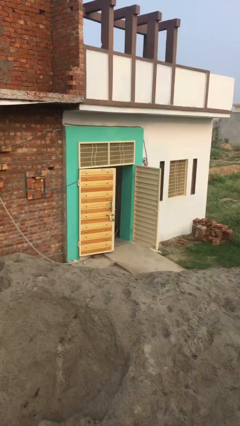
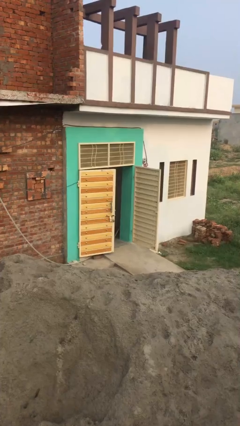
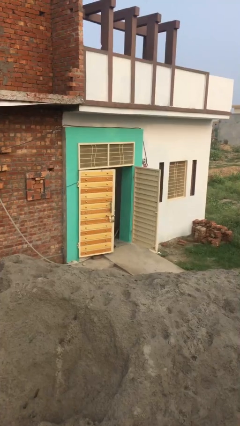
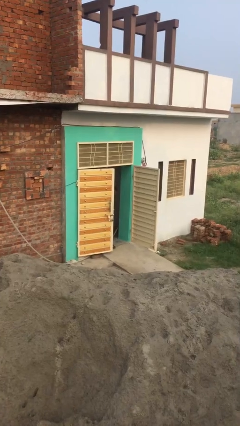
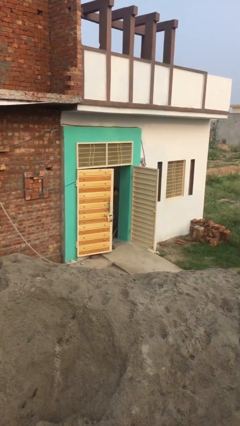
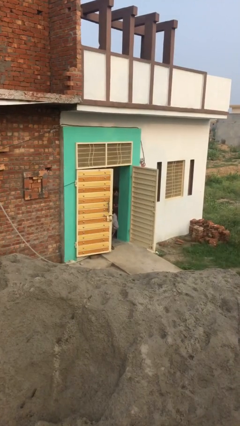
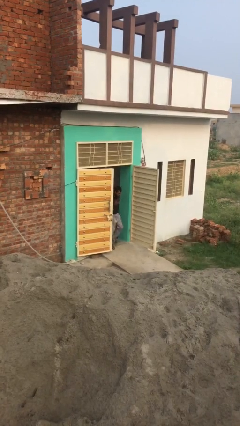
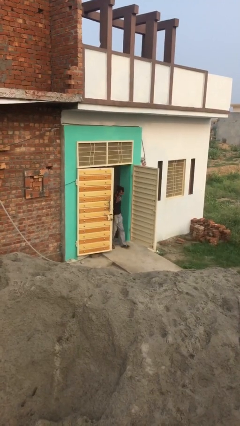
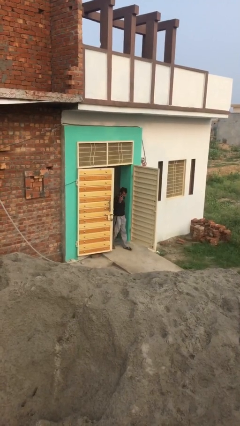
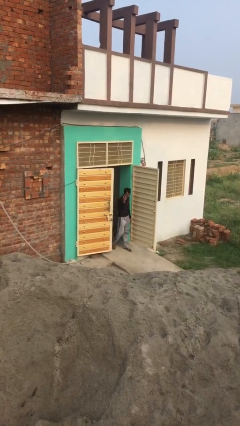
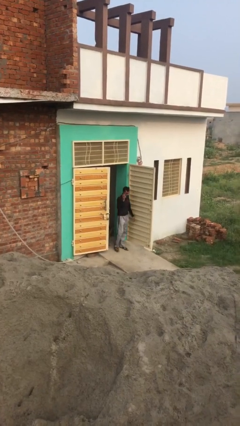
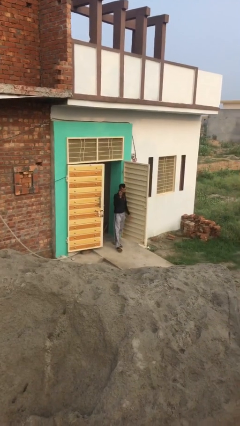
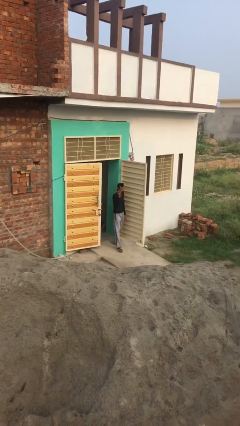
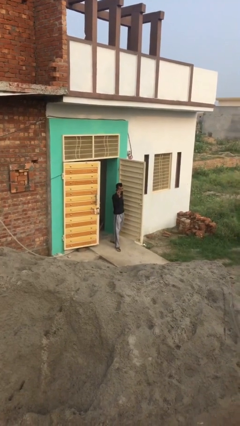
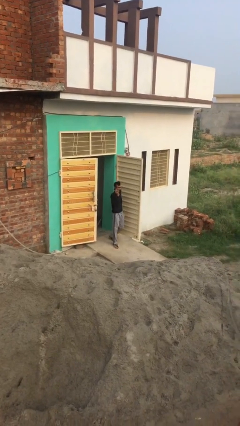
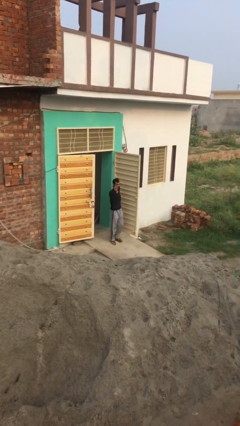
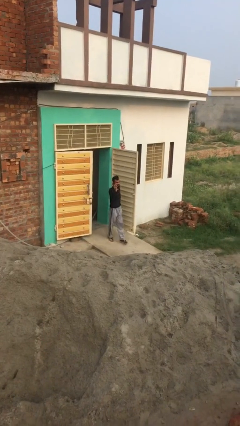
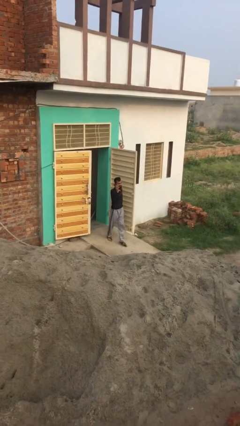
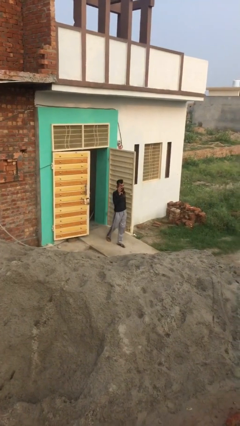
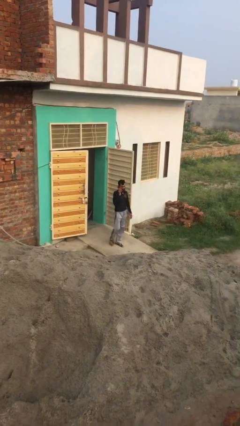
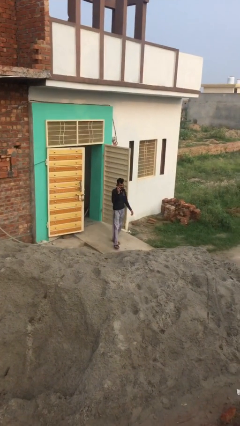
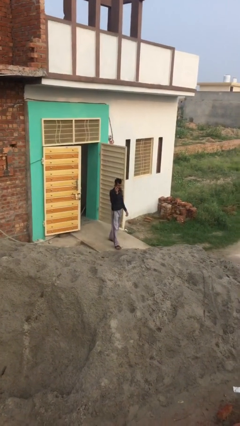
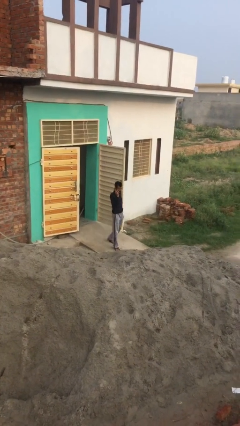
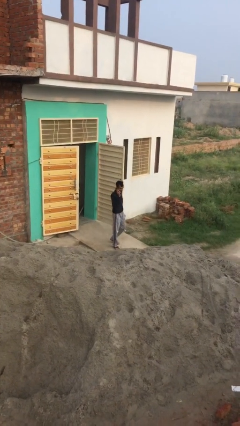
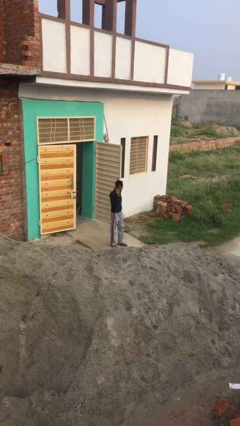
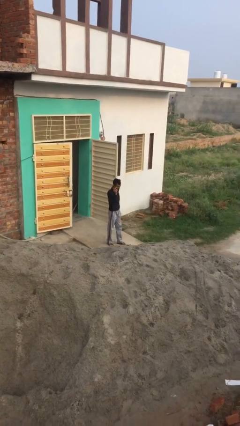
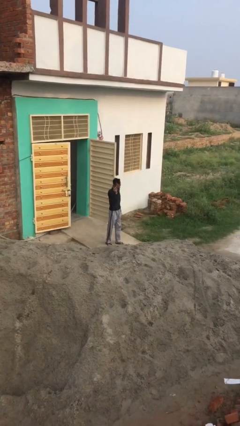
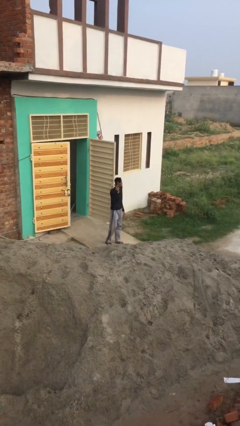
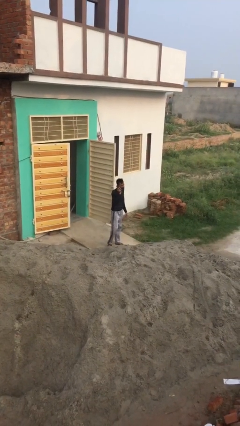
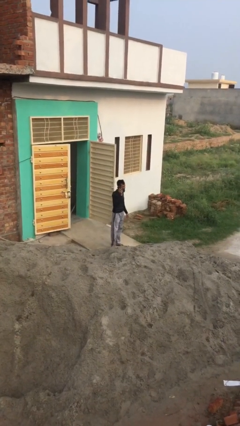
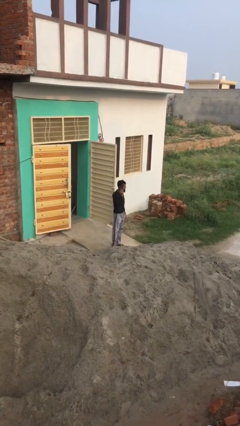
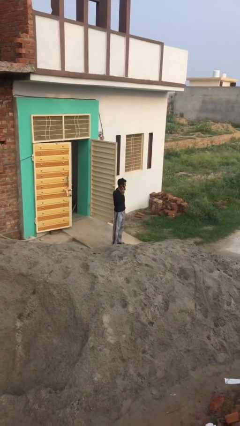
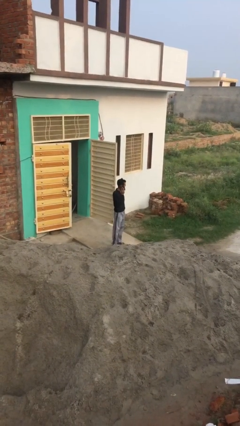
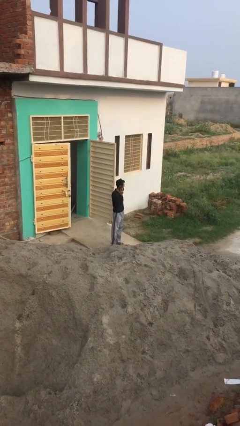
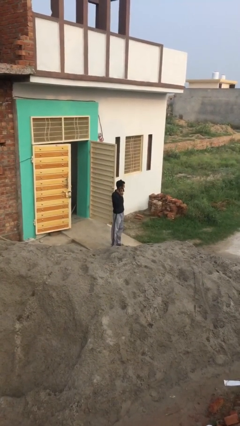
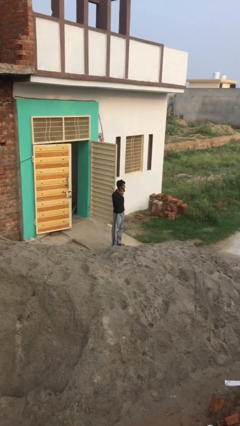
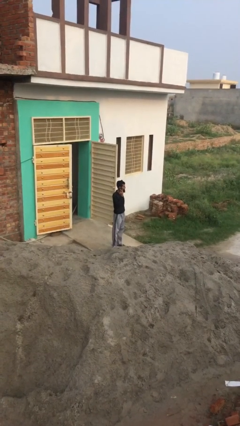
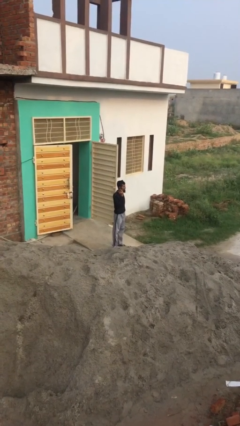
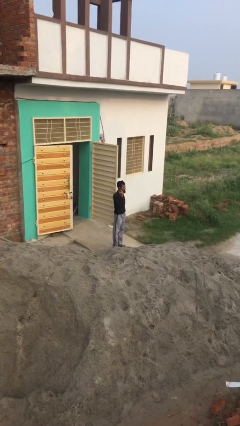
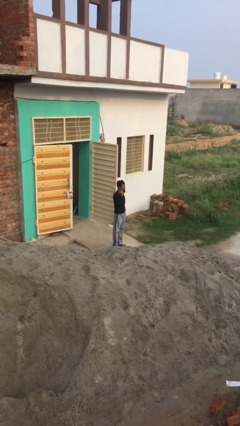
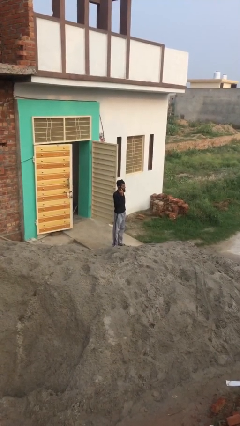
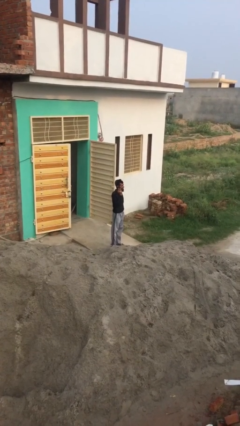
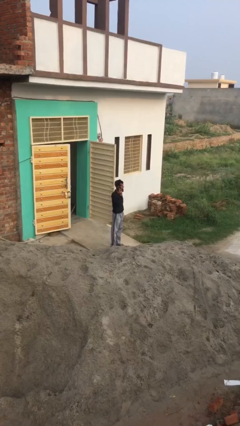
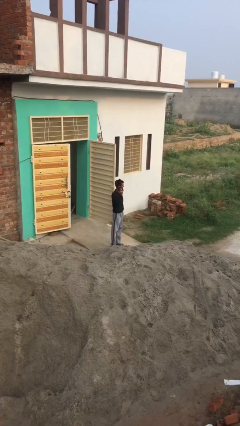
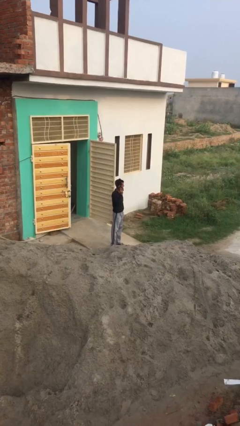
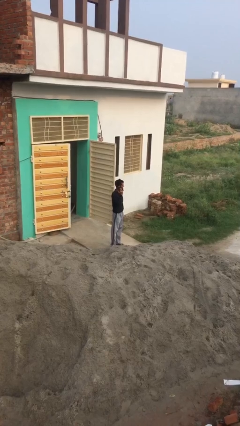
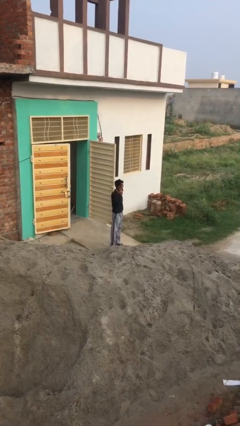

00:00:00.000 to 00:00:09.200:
person enters scene through structure

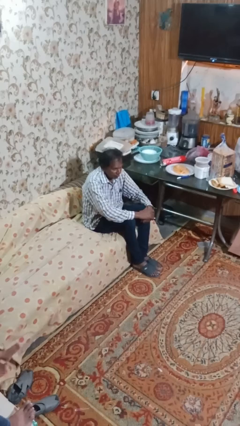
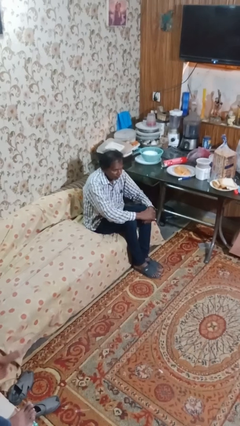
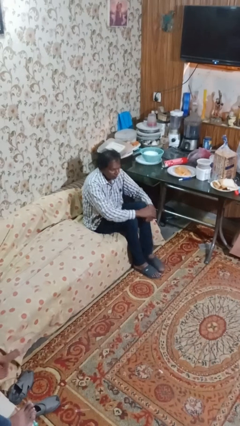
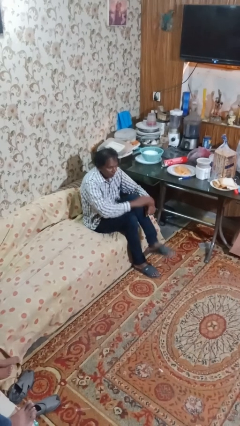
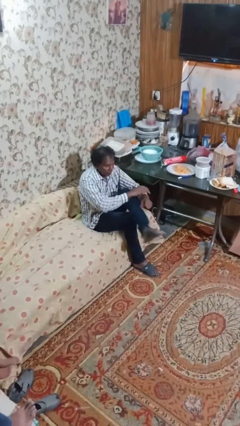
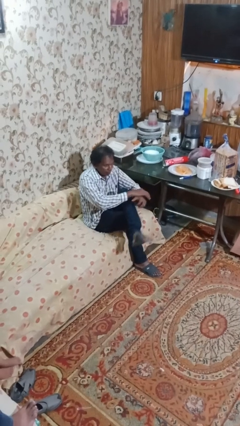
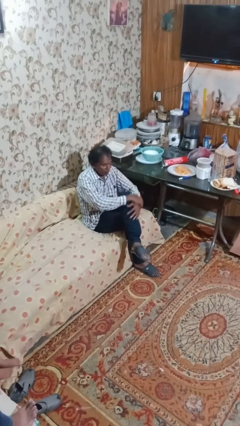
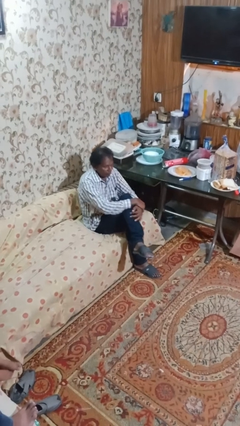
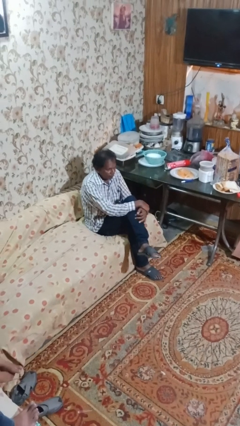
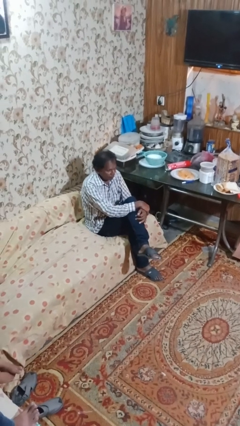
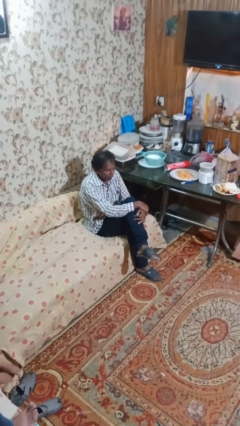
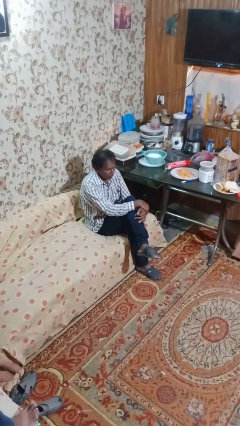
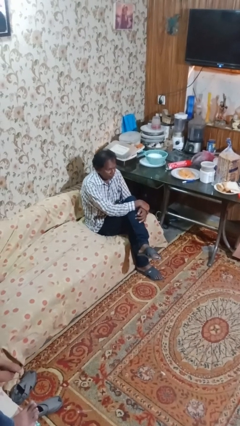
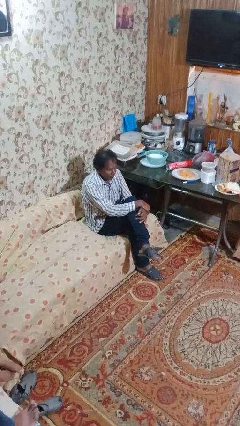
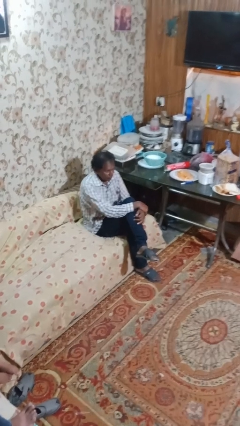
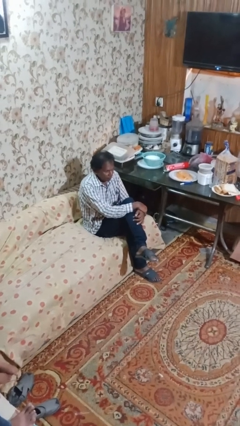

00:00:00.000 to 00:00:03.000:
person crosses legs

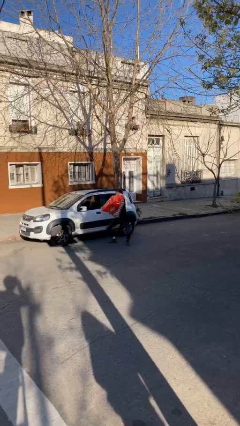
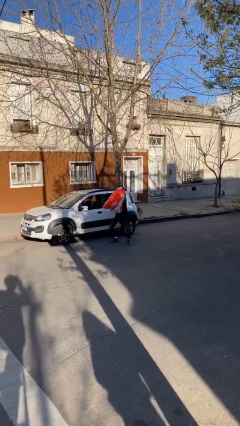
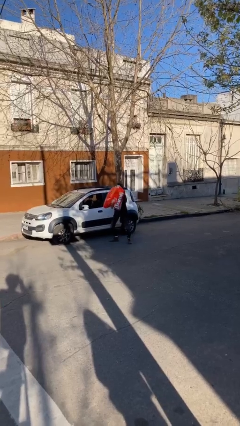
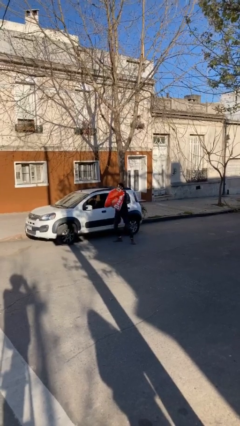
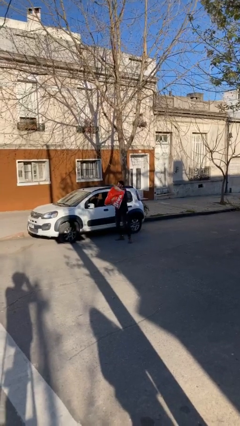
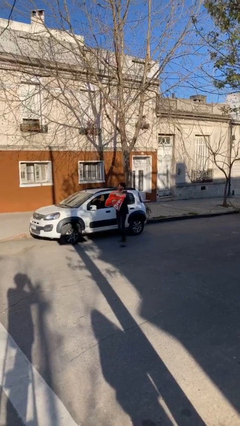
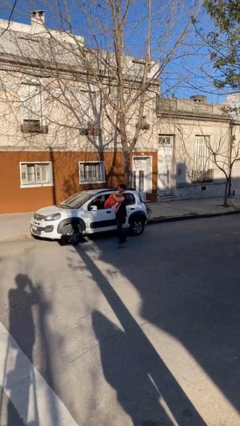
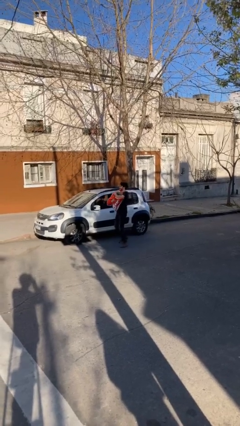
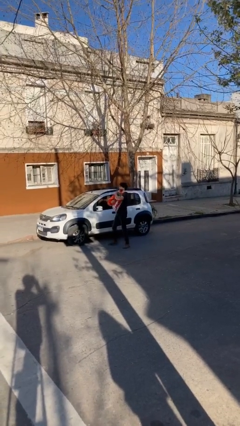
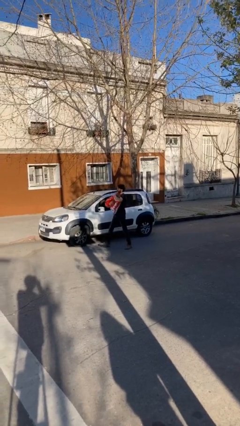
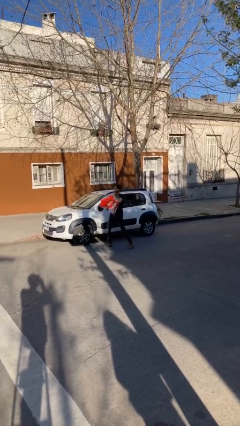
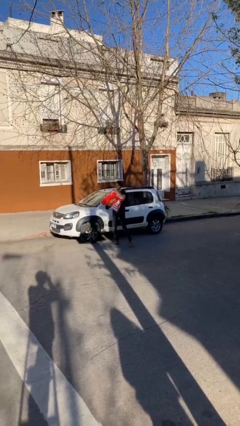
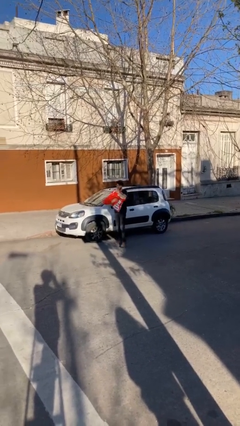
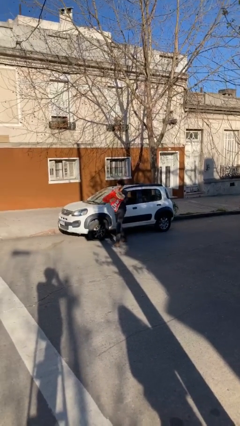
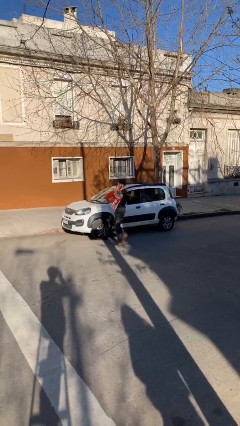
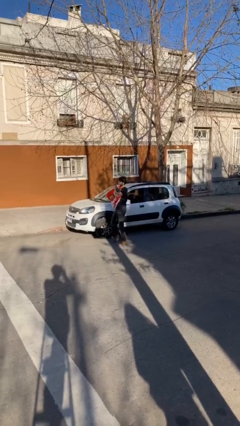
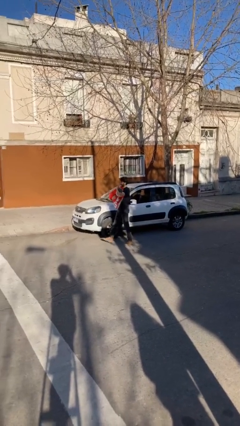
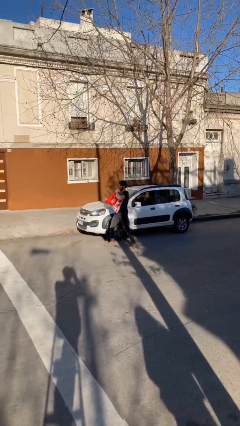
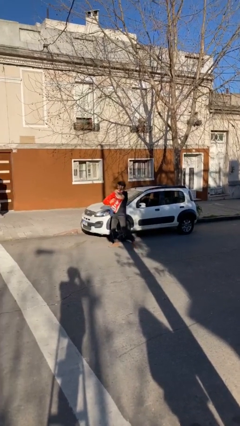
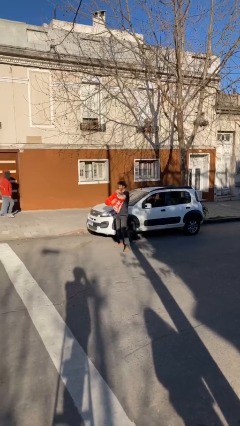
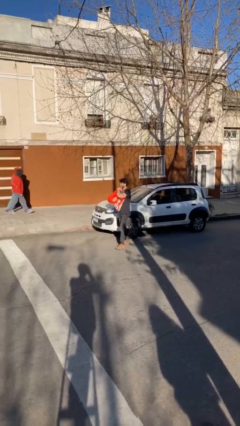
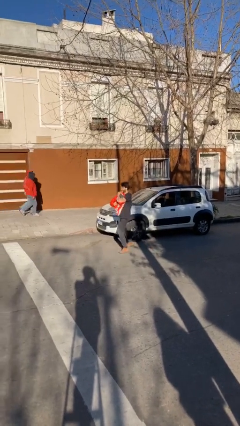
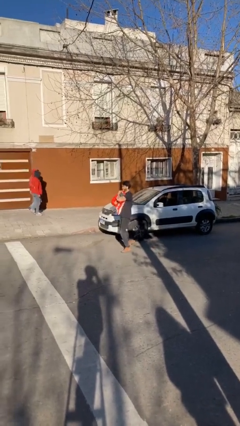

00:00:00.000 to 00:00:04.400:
person carries heavy object

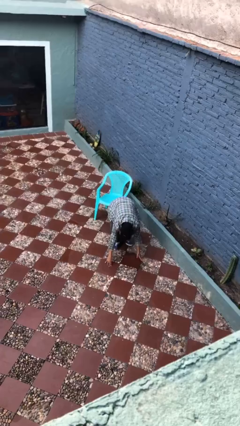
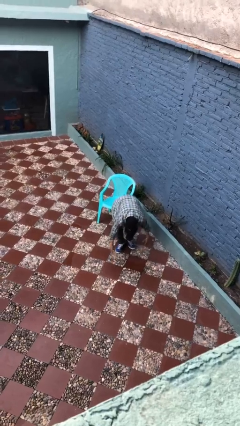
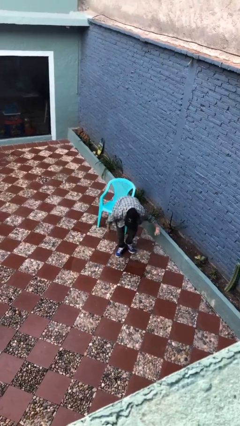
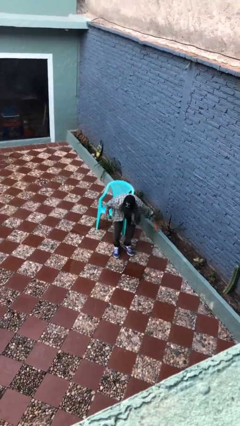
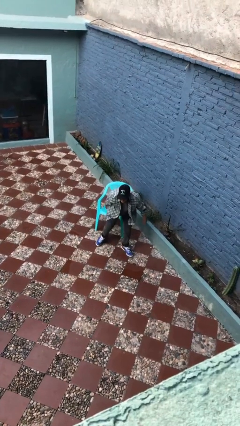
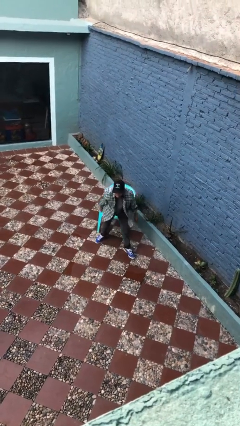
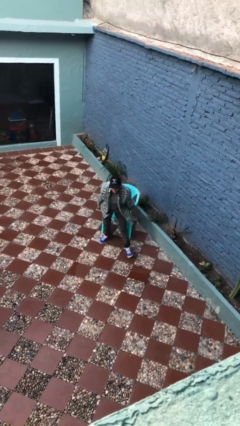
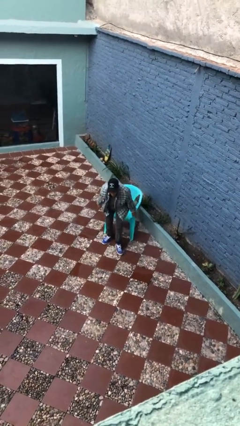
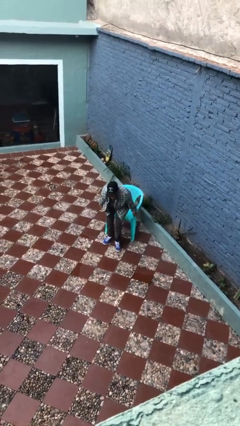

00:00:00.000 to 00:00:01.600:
person stands up from floor
